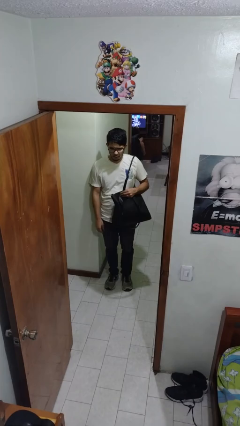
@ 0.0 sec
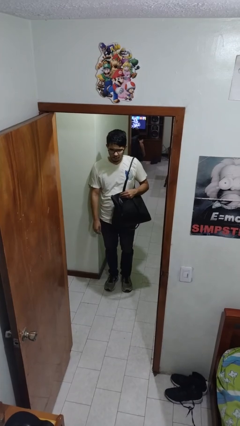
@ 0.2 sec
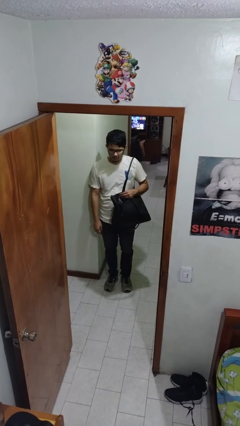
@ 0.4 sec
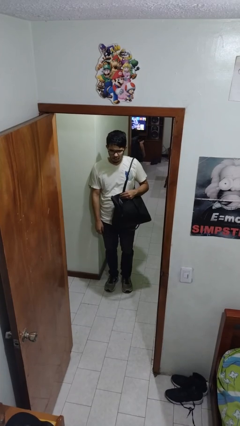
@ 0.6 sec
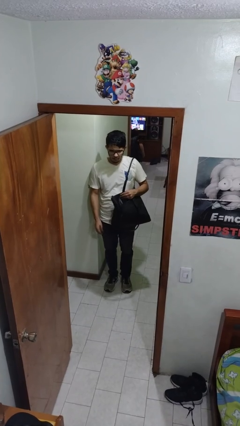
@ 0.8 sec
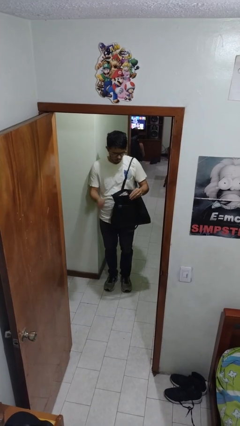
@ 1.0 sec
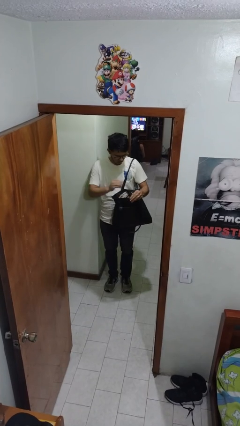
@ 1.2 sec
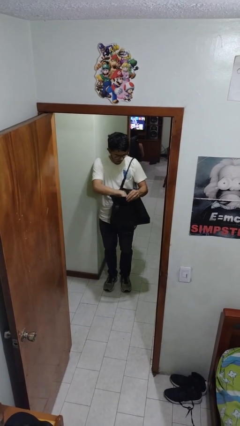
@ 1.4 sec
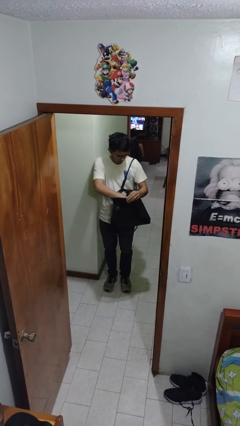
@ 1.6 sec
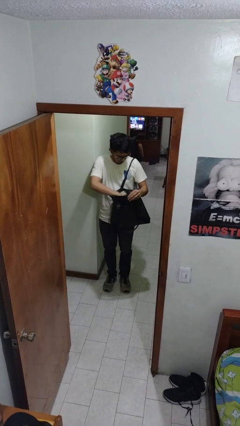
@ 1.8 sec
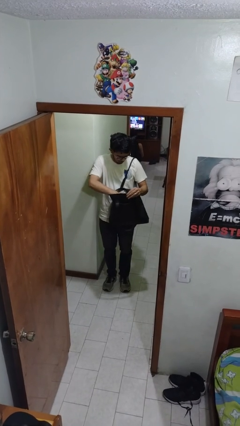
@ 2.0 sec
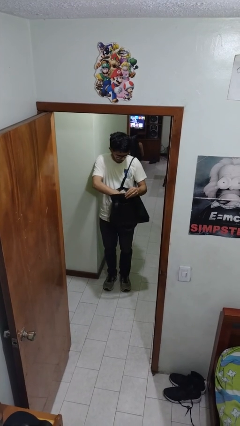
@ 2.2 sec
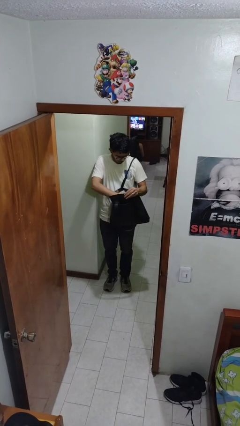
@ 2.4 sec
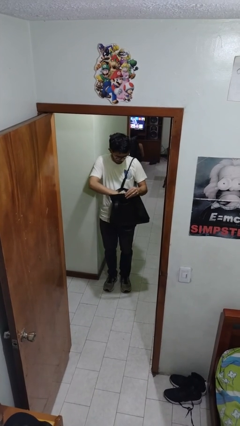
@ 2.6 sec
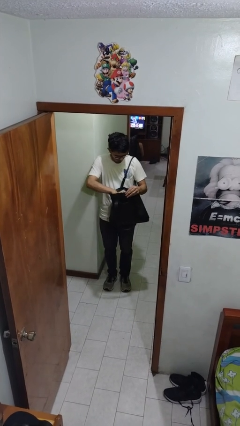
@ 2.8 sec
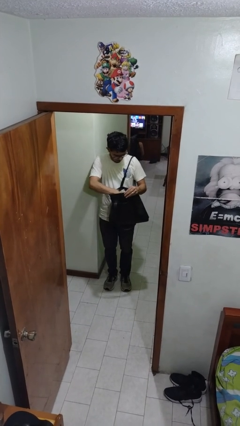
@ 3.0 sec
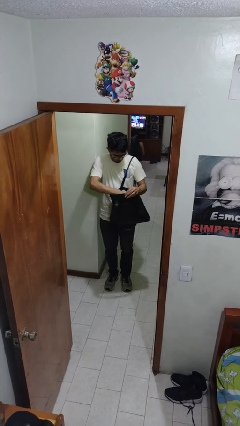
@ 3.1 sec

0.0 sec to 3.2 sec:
person searches in purse

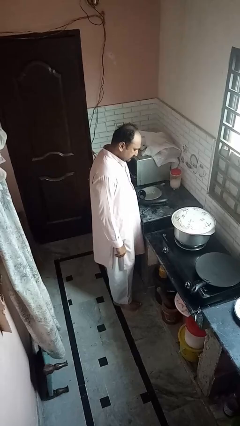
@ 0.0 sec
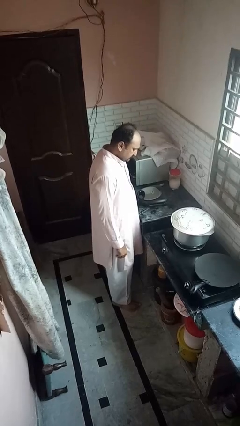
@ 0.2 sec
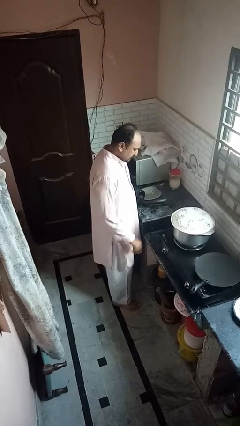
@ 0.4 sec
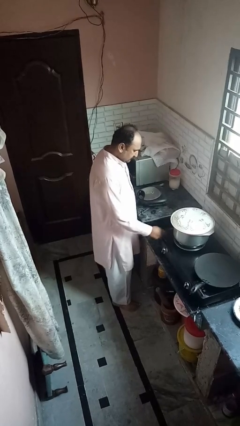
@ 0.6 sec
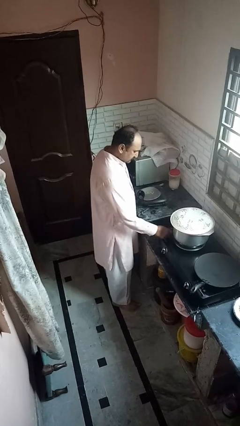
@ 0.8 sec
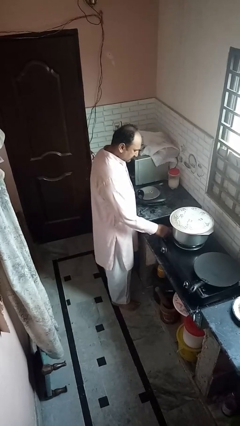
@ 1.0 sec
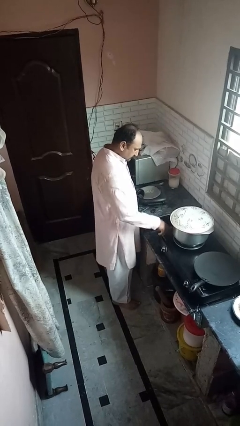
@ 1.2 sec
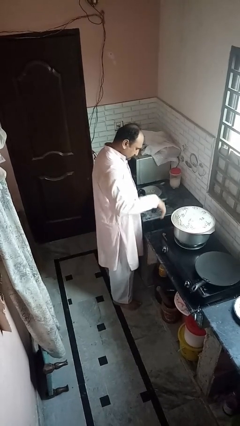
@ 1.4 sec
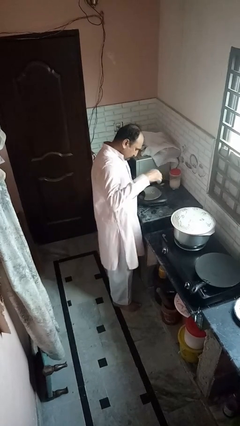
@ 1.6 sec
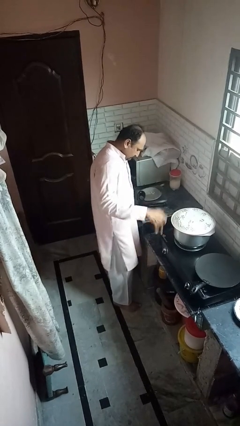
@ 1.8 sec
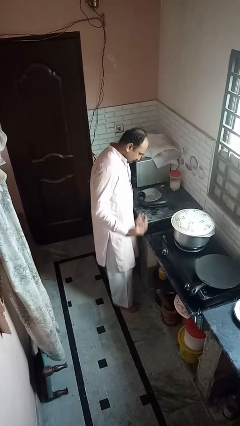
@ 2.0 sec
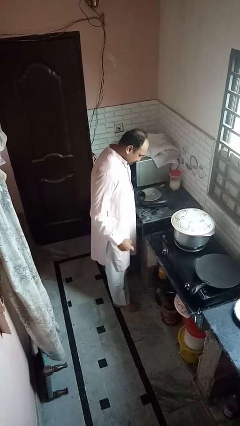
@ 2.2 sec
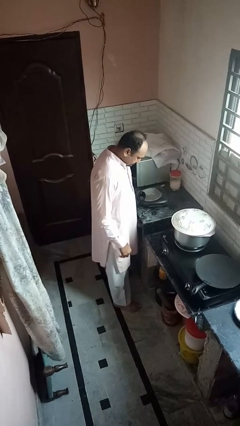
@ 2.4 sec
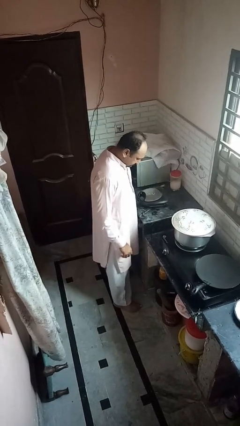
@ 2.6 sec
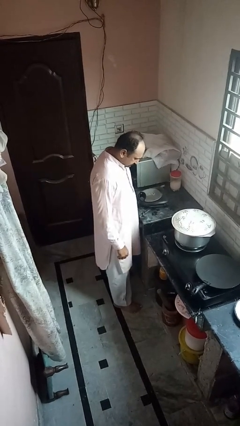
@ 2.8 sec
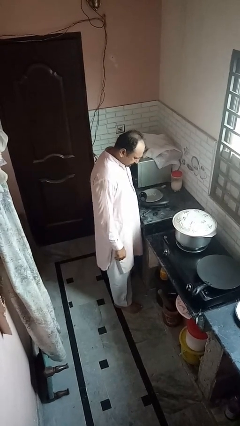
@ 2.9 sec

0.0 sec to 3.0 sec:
person burns hand

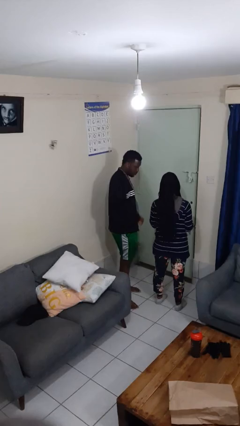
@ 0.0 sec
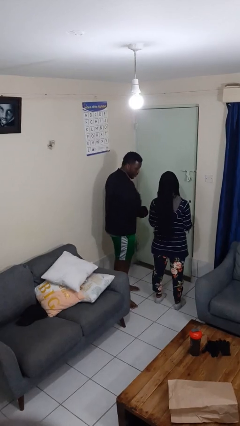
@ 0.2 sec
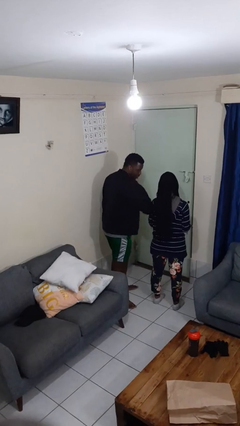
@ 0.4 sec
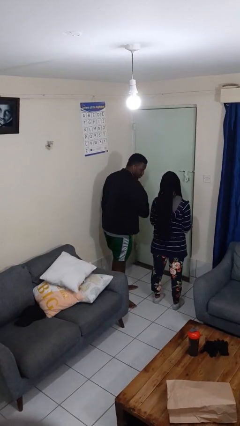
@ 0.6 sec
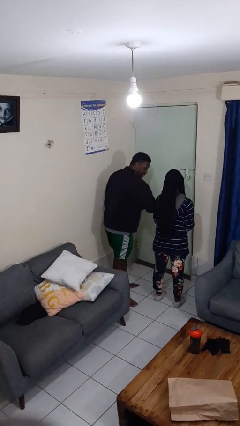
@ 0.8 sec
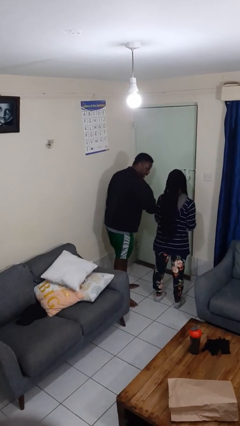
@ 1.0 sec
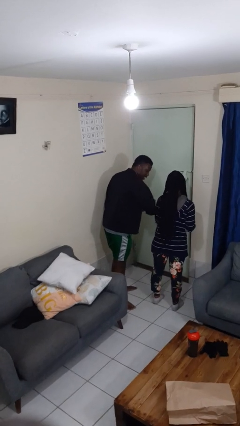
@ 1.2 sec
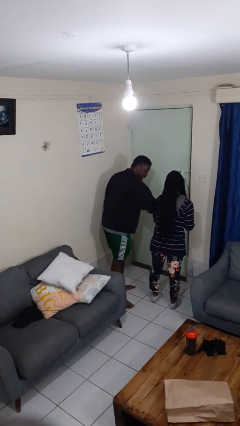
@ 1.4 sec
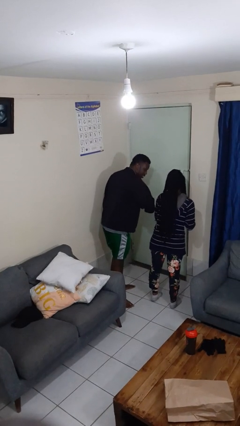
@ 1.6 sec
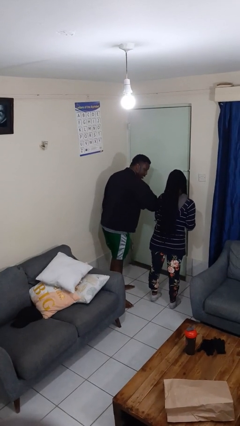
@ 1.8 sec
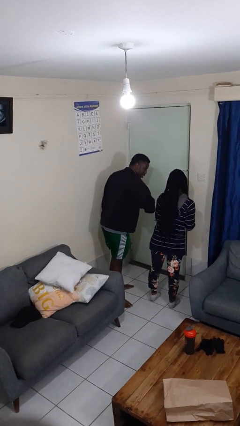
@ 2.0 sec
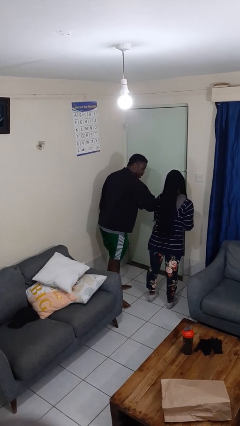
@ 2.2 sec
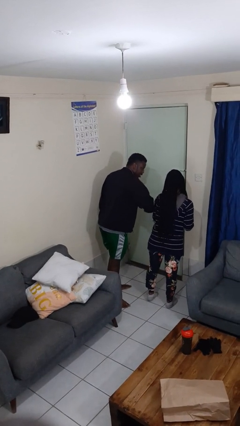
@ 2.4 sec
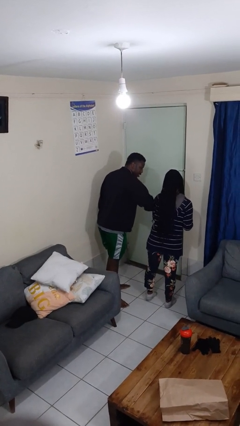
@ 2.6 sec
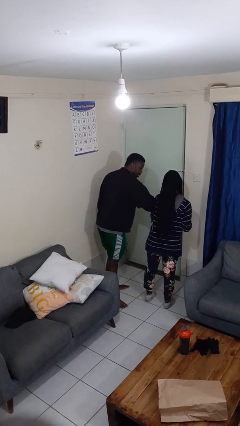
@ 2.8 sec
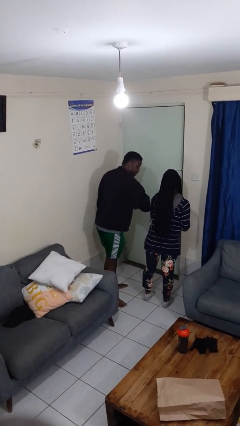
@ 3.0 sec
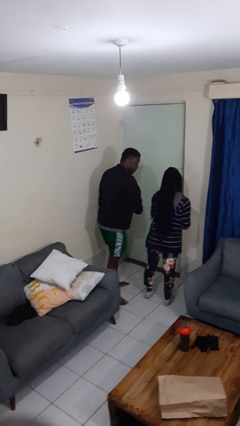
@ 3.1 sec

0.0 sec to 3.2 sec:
person nudges person with elbow

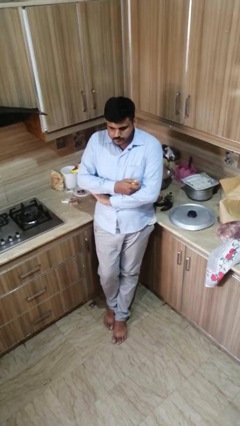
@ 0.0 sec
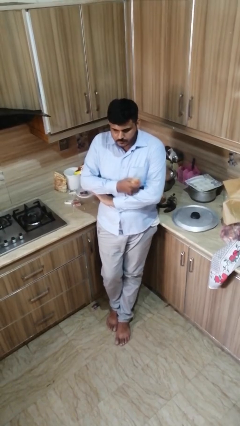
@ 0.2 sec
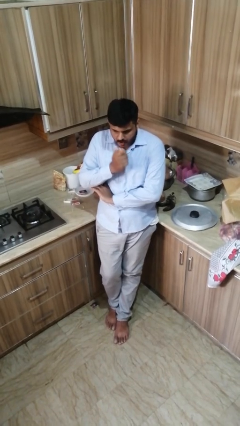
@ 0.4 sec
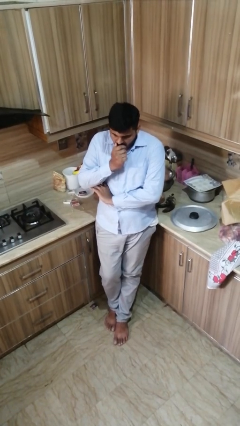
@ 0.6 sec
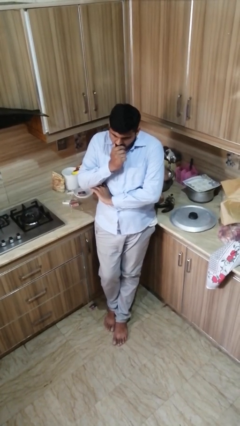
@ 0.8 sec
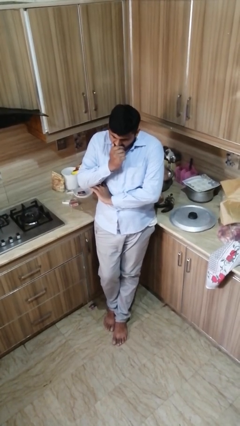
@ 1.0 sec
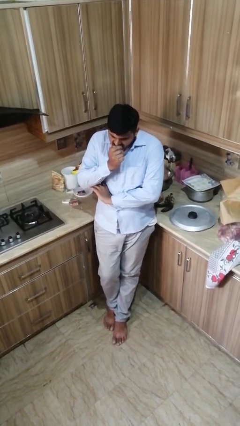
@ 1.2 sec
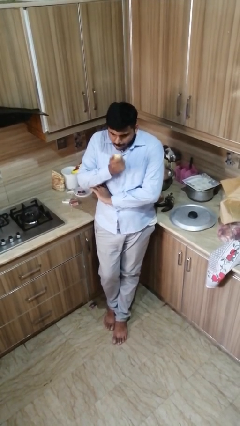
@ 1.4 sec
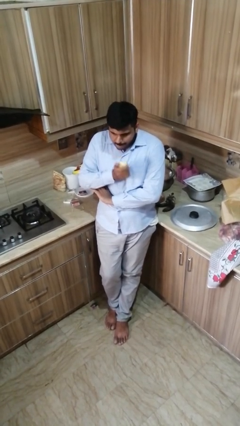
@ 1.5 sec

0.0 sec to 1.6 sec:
person eats apple

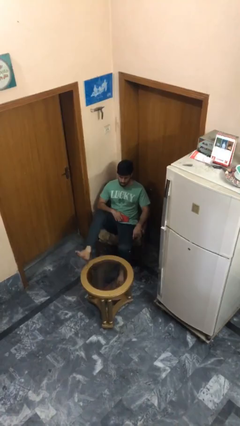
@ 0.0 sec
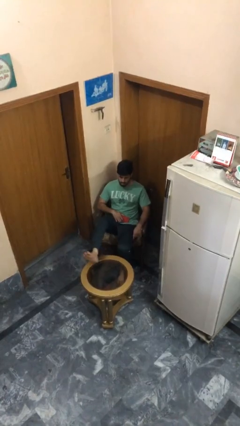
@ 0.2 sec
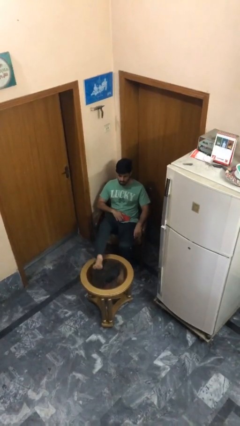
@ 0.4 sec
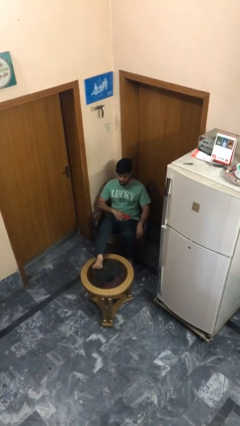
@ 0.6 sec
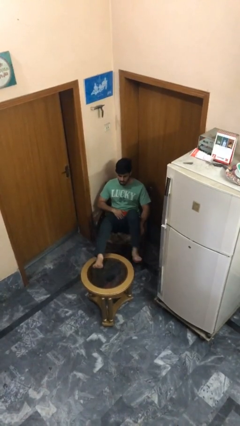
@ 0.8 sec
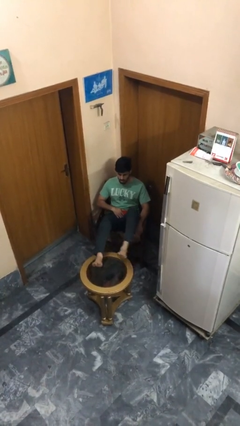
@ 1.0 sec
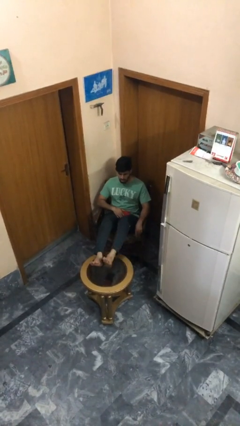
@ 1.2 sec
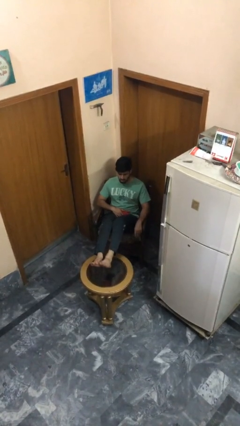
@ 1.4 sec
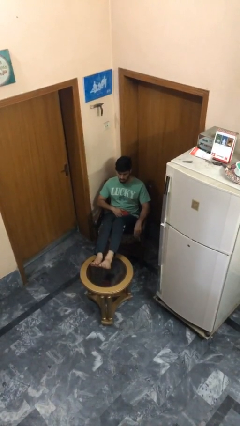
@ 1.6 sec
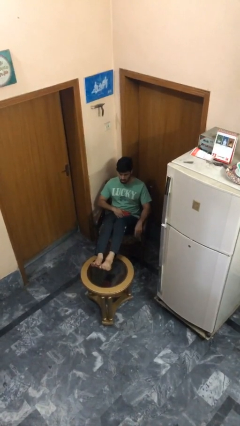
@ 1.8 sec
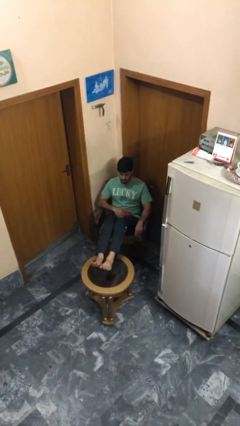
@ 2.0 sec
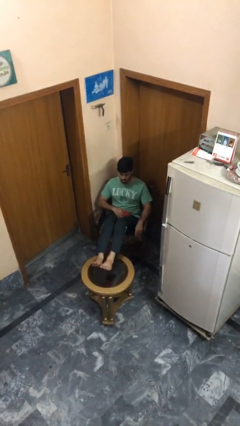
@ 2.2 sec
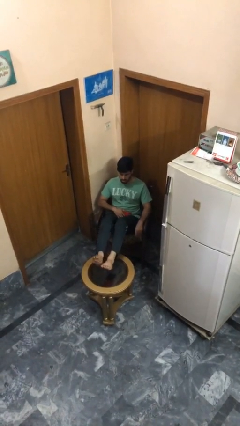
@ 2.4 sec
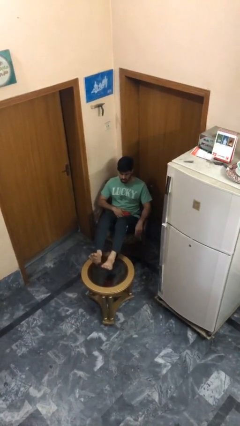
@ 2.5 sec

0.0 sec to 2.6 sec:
person puts feet up

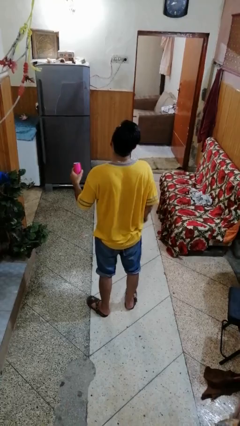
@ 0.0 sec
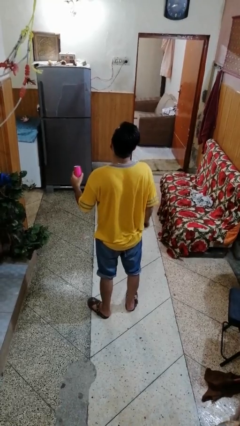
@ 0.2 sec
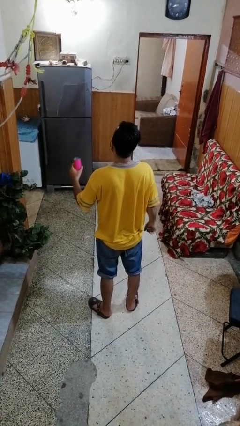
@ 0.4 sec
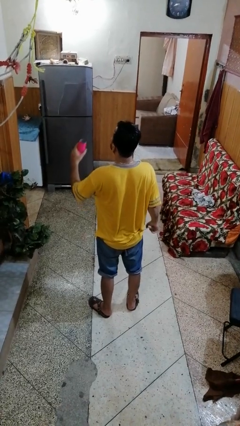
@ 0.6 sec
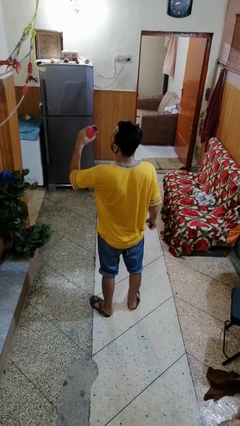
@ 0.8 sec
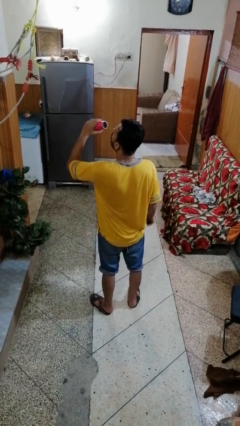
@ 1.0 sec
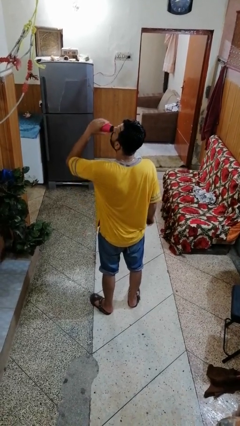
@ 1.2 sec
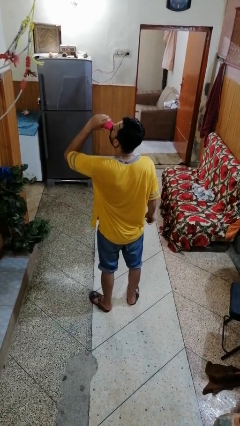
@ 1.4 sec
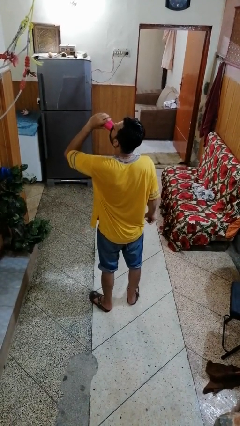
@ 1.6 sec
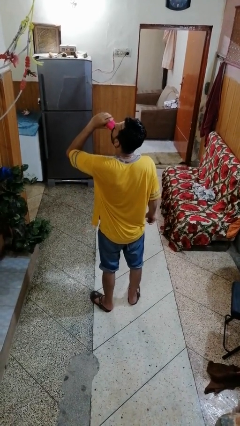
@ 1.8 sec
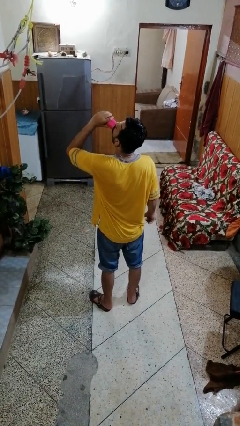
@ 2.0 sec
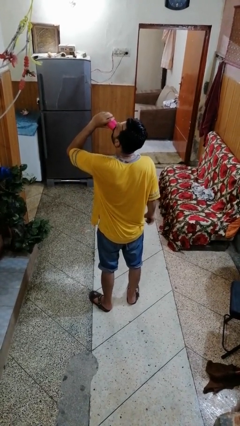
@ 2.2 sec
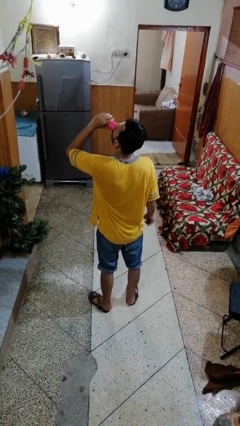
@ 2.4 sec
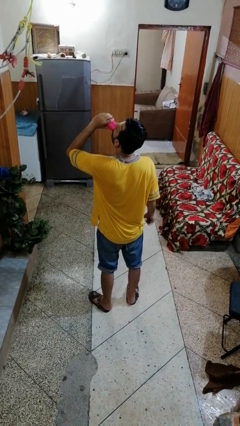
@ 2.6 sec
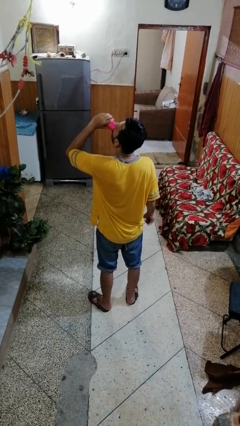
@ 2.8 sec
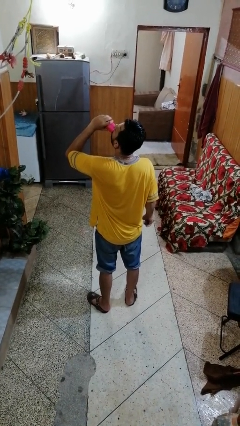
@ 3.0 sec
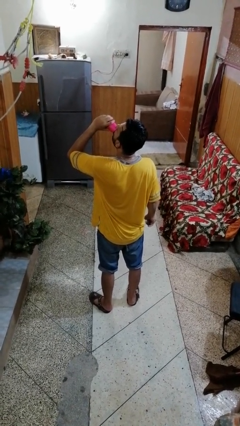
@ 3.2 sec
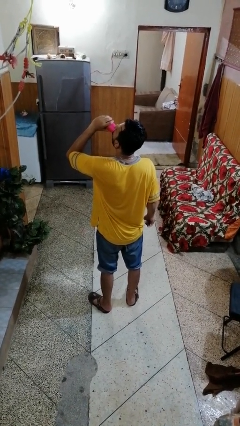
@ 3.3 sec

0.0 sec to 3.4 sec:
person drinks from beverage can

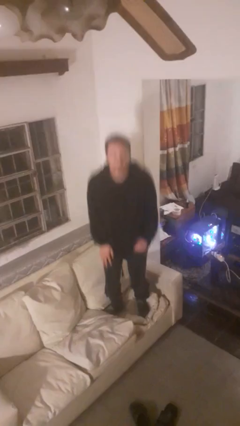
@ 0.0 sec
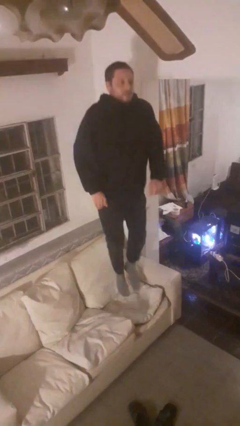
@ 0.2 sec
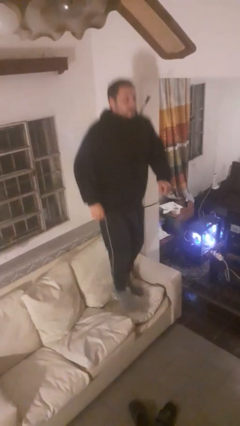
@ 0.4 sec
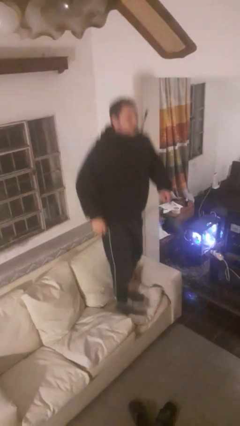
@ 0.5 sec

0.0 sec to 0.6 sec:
person jumps on couch
